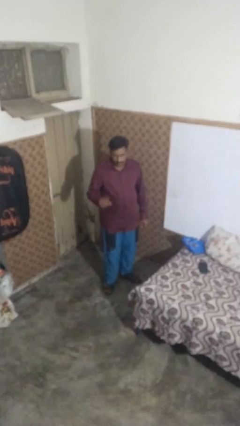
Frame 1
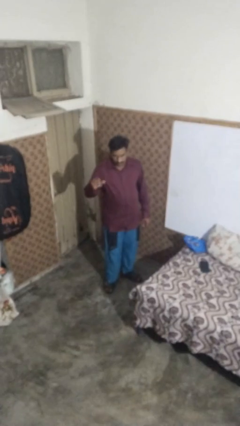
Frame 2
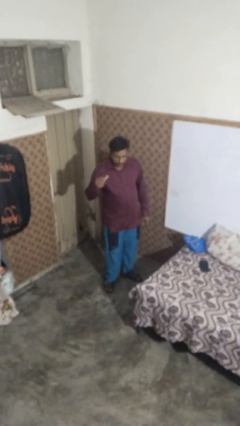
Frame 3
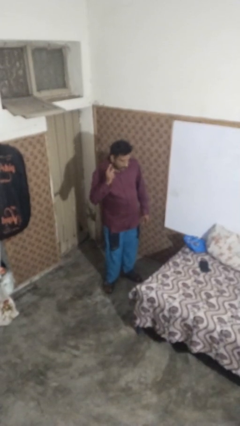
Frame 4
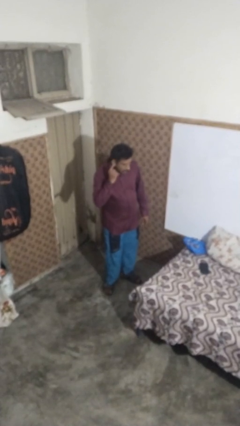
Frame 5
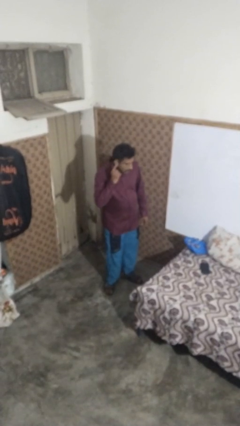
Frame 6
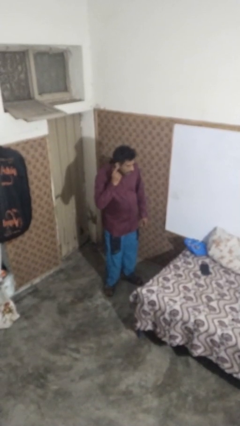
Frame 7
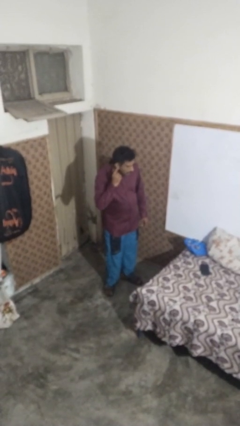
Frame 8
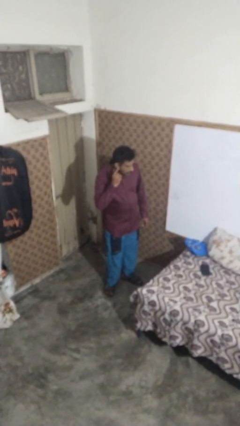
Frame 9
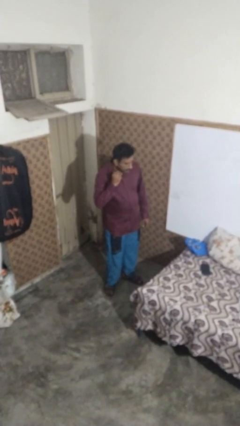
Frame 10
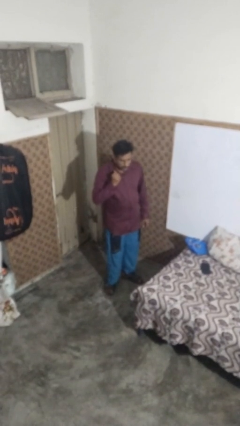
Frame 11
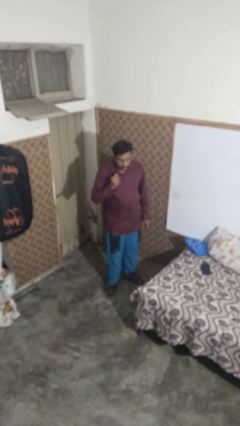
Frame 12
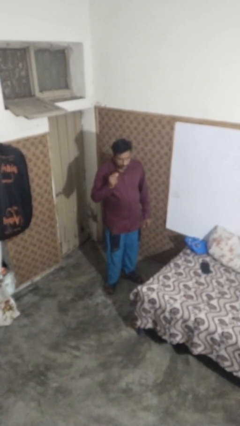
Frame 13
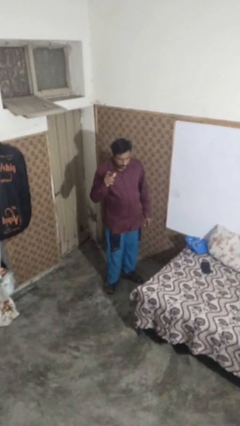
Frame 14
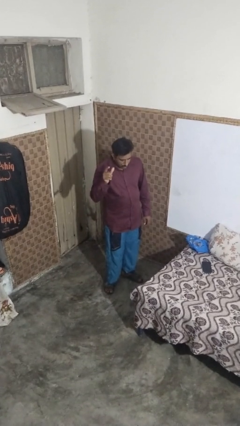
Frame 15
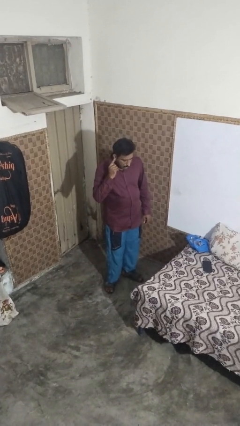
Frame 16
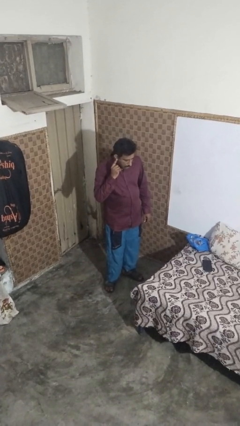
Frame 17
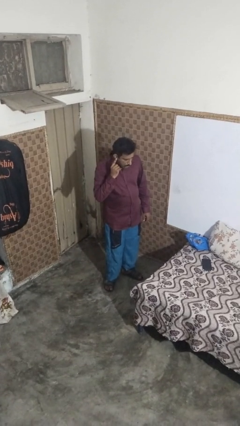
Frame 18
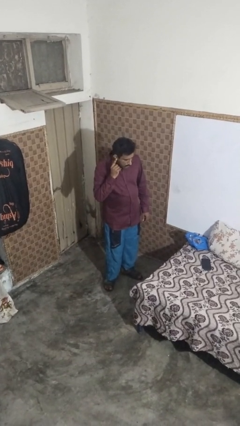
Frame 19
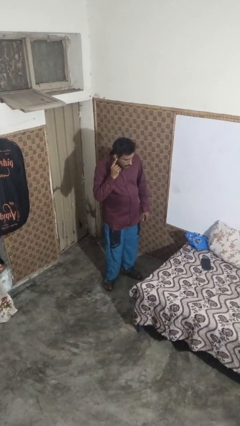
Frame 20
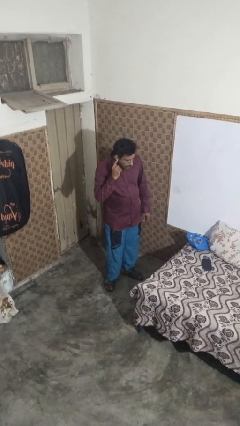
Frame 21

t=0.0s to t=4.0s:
person gestures listen closely

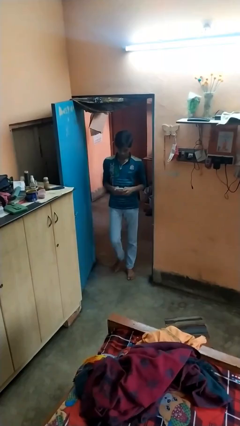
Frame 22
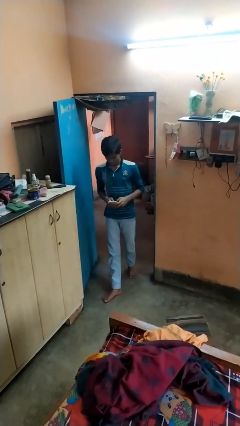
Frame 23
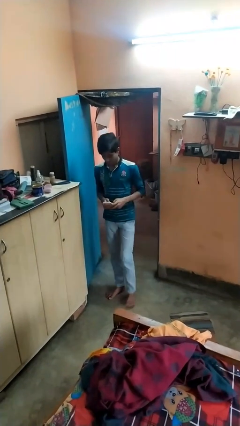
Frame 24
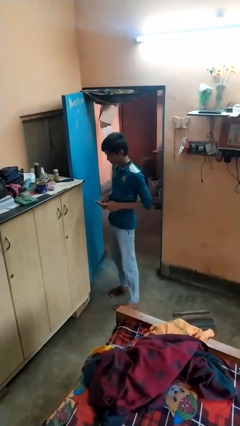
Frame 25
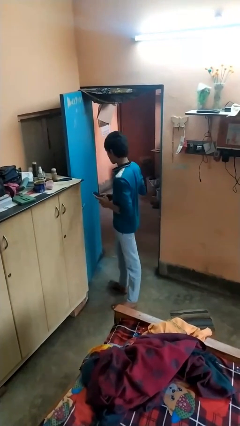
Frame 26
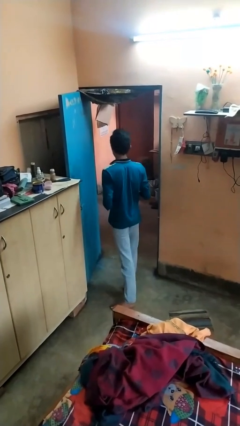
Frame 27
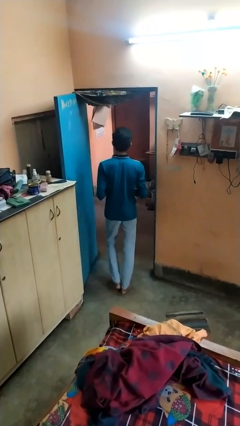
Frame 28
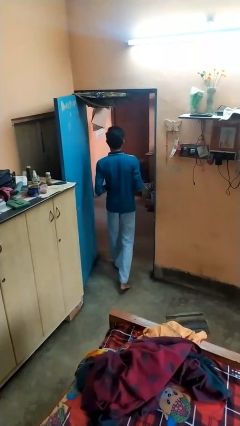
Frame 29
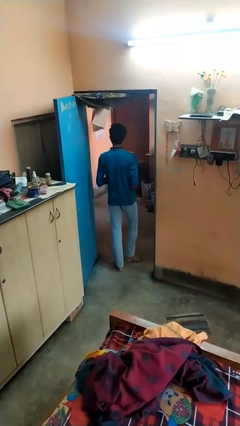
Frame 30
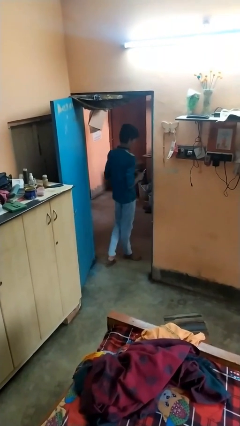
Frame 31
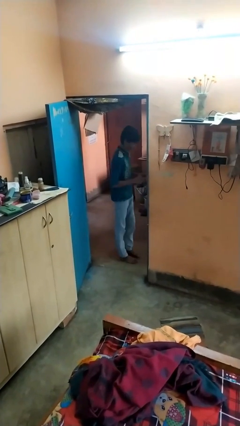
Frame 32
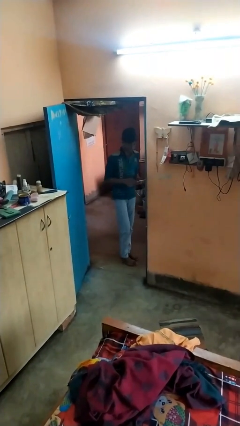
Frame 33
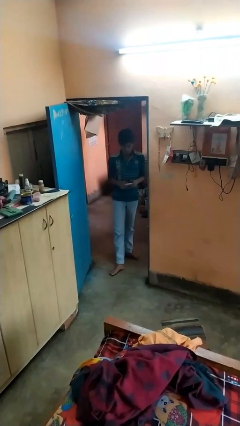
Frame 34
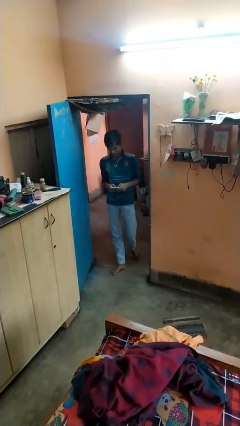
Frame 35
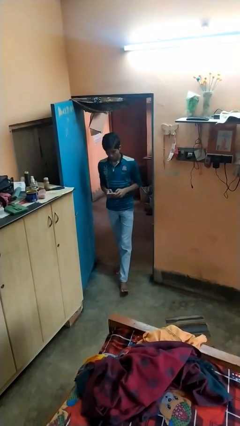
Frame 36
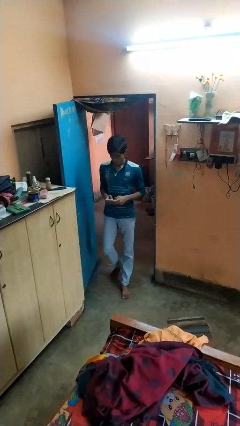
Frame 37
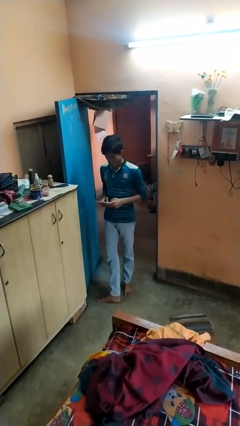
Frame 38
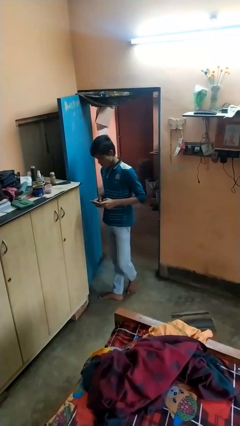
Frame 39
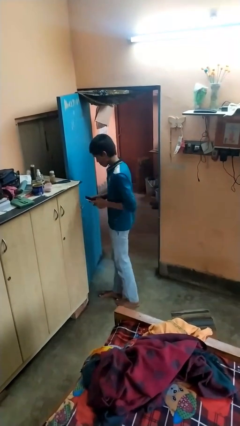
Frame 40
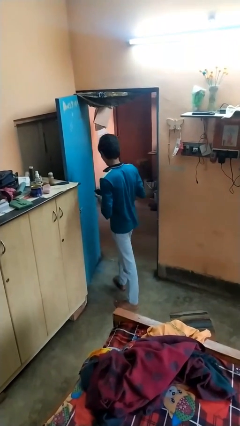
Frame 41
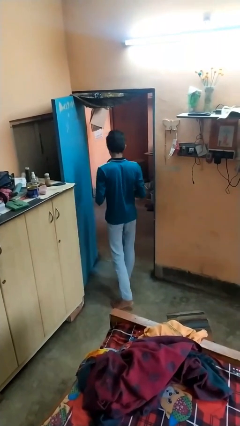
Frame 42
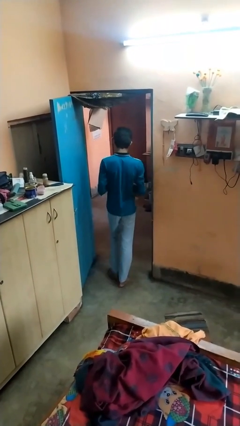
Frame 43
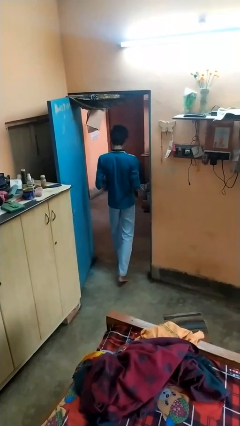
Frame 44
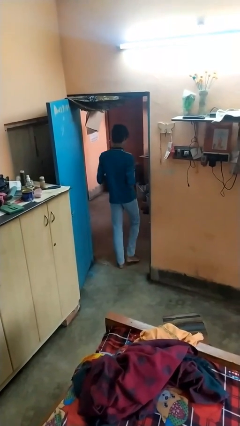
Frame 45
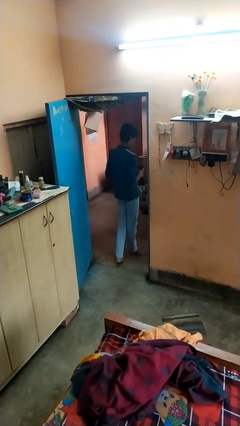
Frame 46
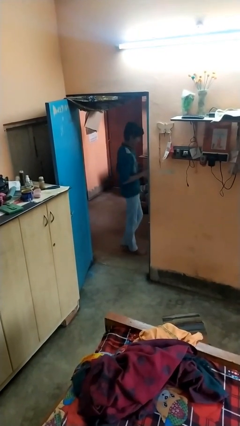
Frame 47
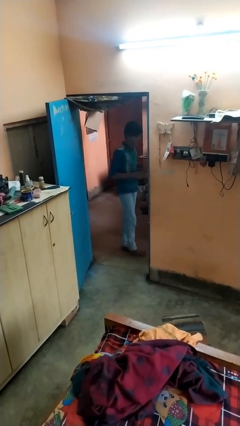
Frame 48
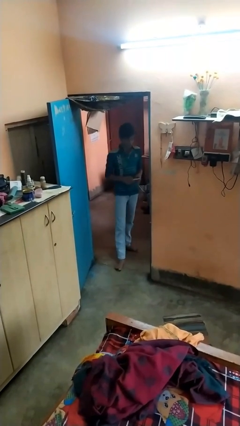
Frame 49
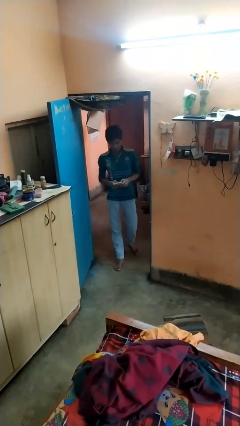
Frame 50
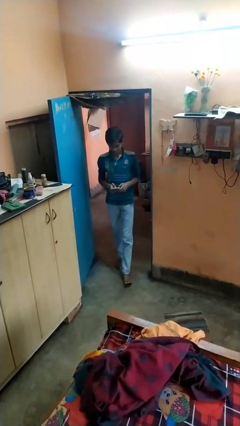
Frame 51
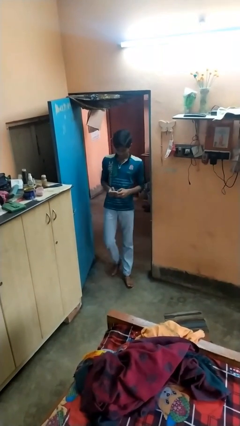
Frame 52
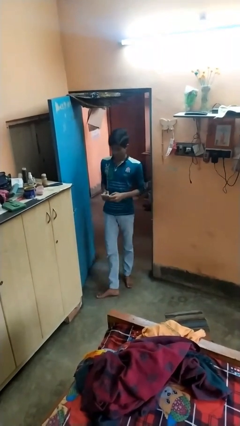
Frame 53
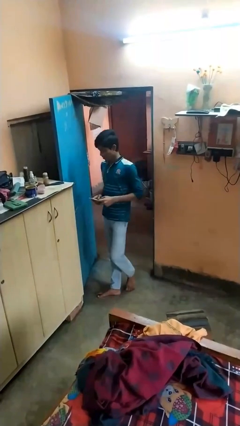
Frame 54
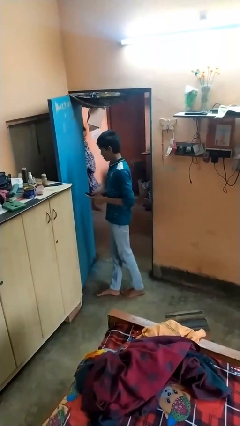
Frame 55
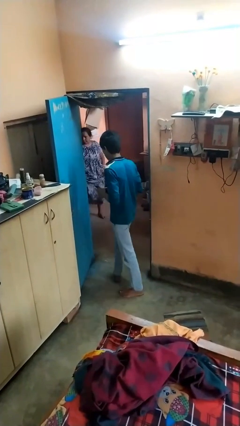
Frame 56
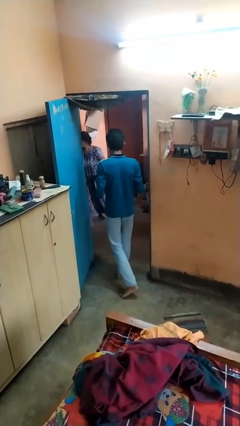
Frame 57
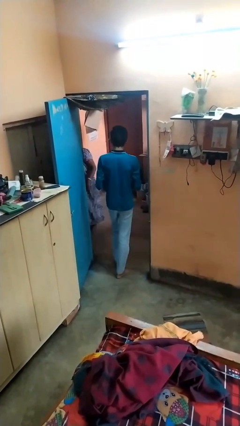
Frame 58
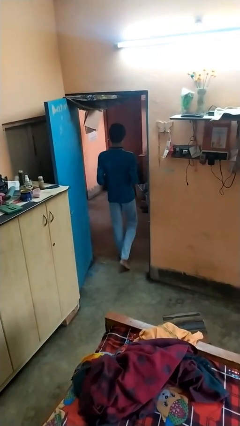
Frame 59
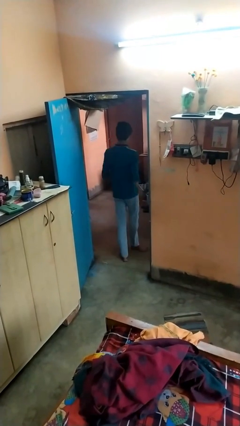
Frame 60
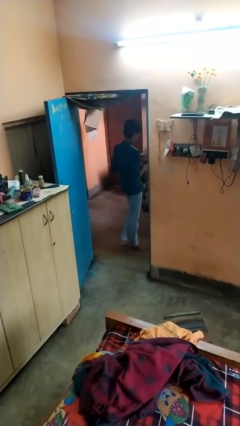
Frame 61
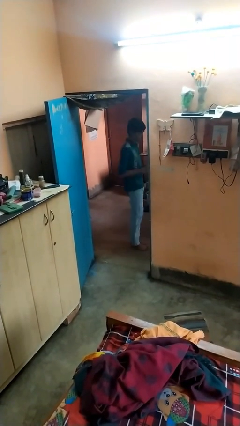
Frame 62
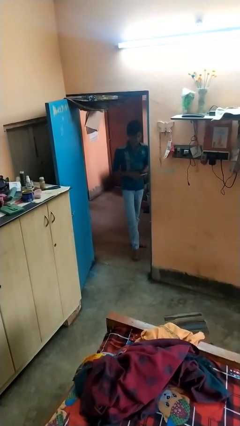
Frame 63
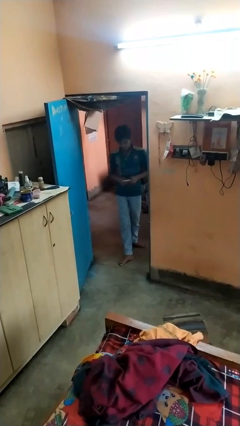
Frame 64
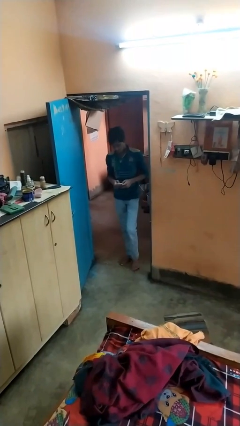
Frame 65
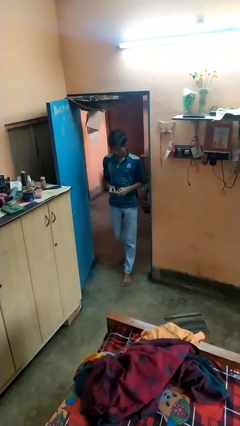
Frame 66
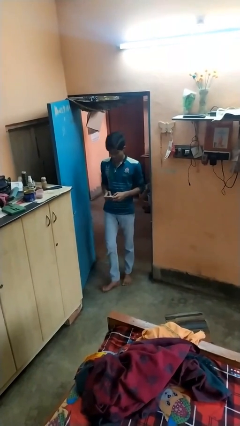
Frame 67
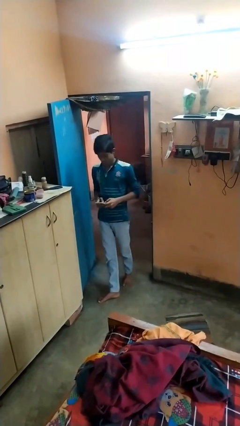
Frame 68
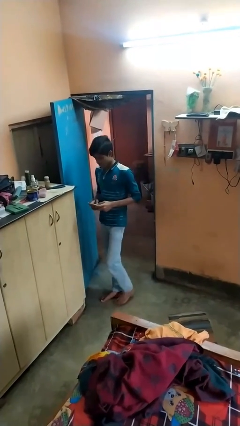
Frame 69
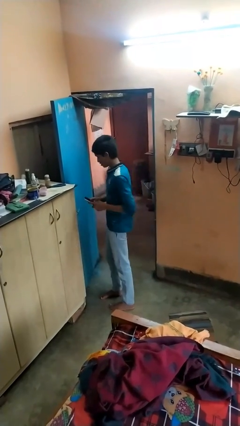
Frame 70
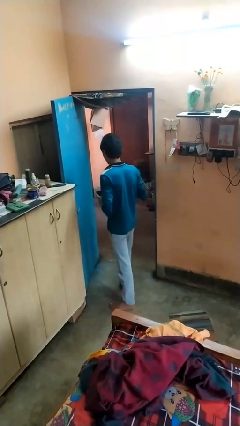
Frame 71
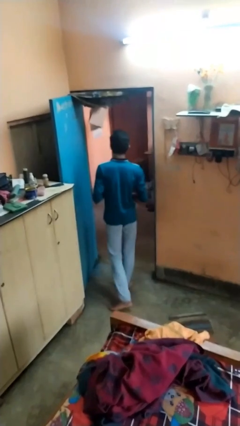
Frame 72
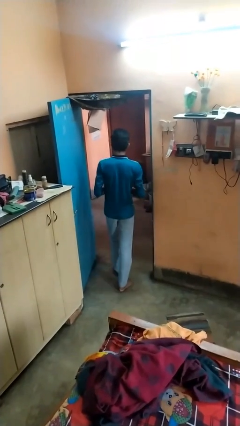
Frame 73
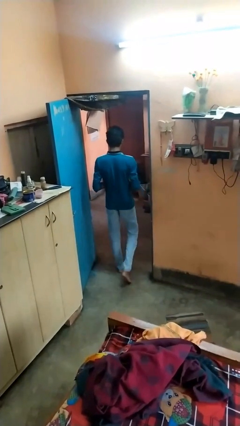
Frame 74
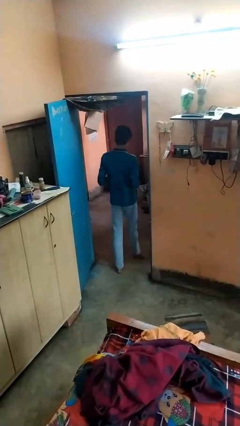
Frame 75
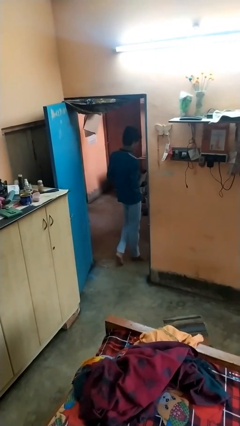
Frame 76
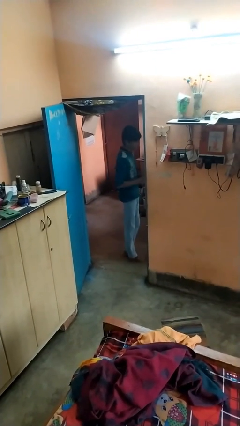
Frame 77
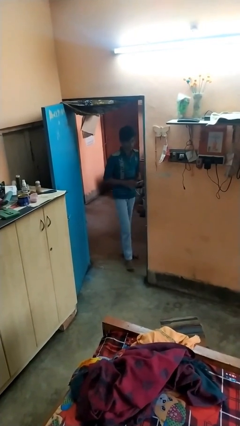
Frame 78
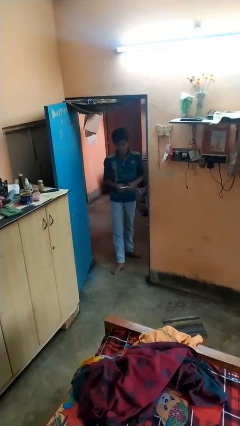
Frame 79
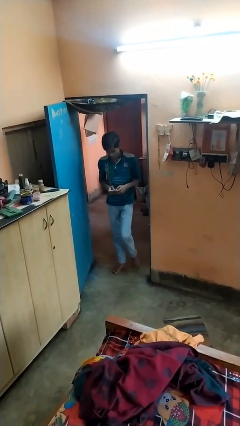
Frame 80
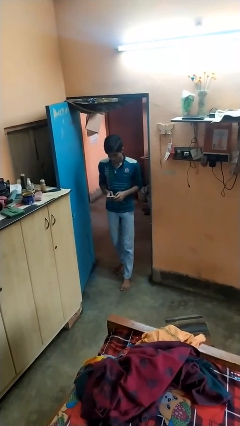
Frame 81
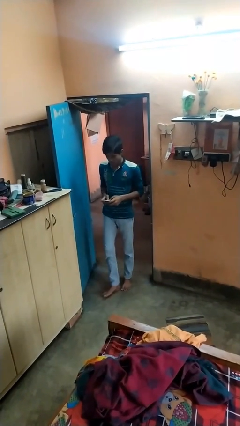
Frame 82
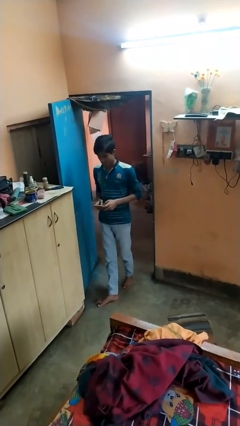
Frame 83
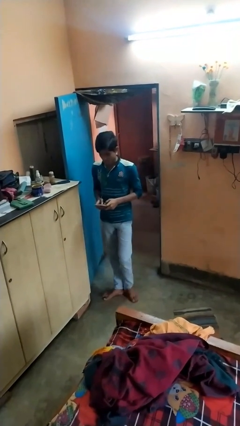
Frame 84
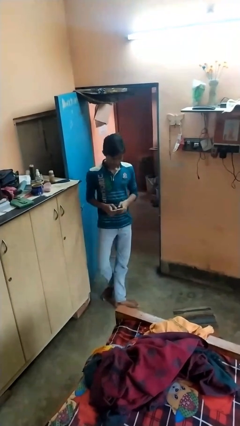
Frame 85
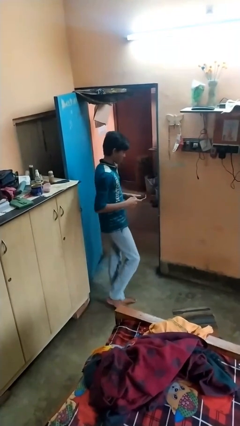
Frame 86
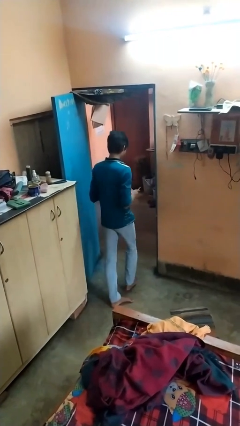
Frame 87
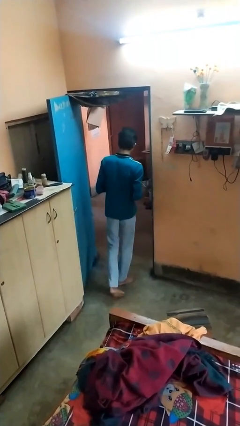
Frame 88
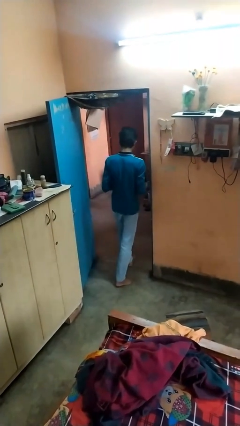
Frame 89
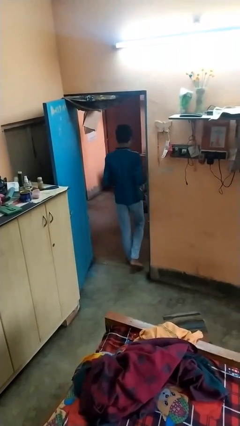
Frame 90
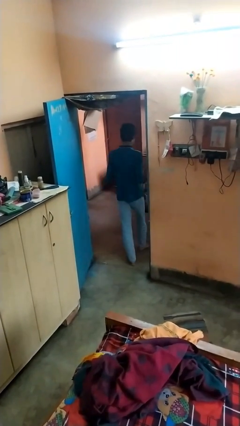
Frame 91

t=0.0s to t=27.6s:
person texts on phone

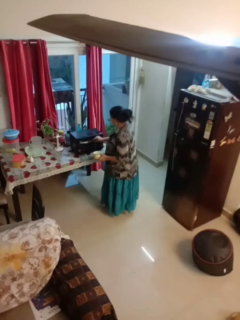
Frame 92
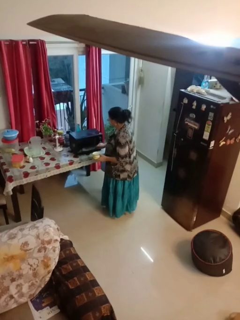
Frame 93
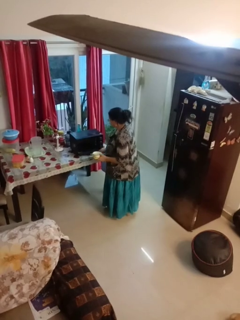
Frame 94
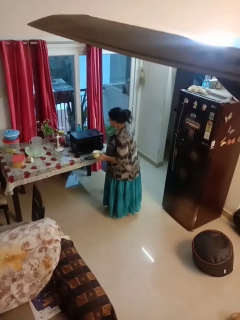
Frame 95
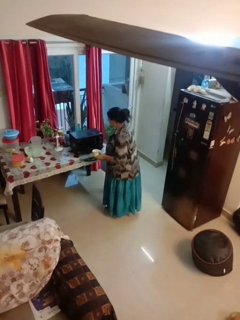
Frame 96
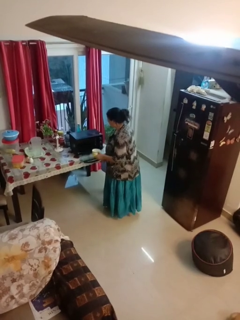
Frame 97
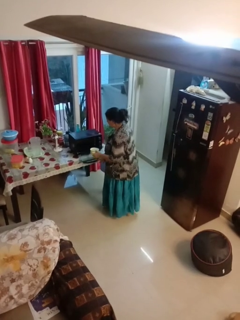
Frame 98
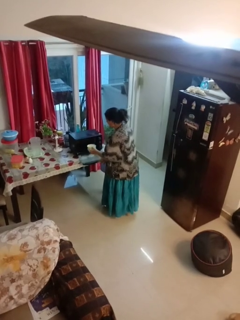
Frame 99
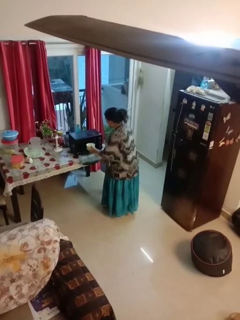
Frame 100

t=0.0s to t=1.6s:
person opens microwave
